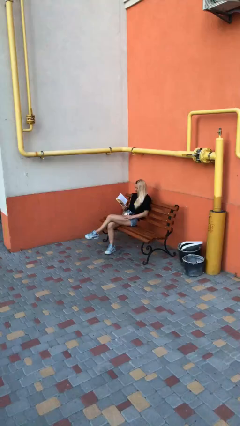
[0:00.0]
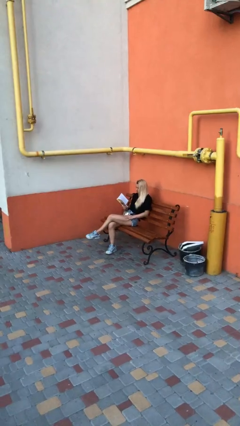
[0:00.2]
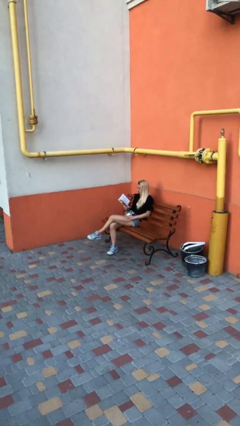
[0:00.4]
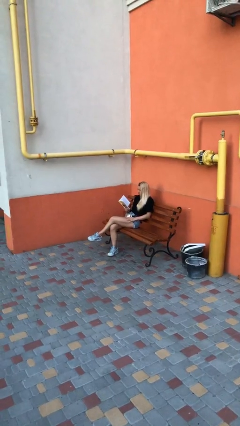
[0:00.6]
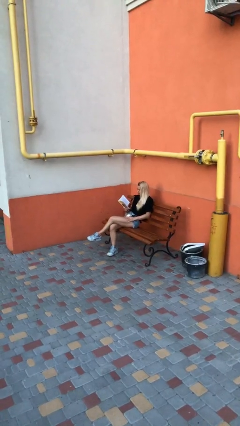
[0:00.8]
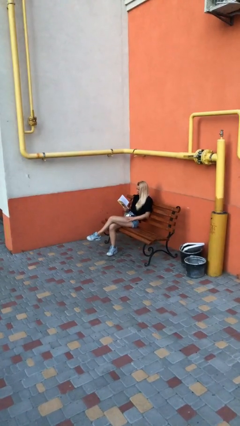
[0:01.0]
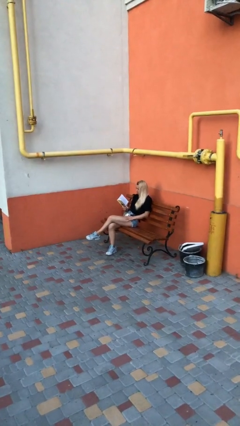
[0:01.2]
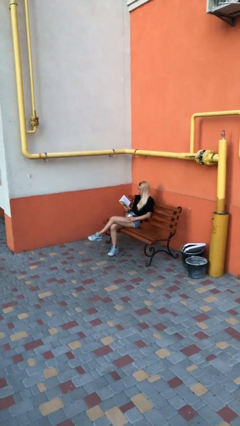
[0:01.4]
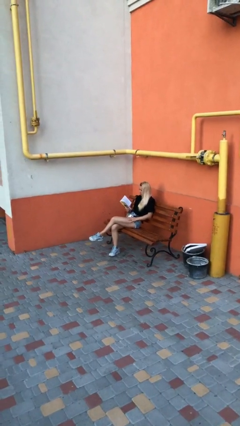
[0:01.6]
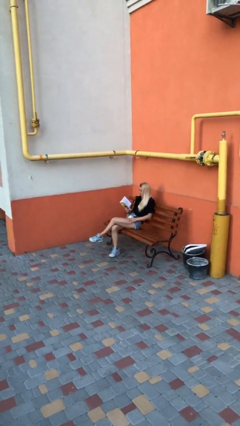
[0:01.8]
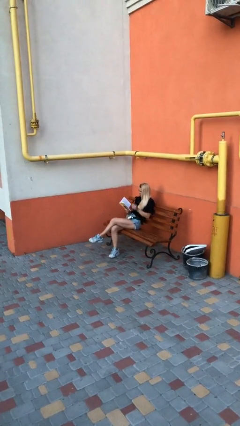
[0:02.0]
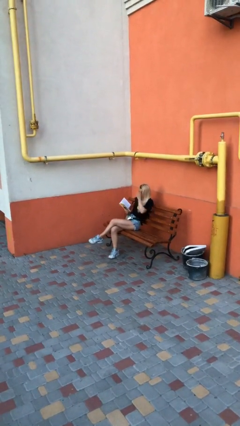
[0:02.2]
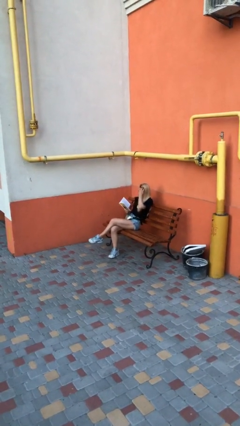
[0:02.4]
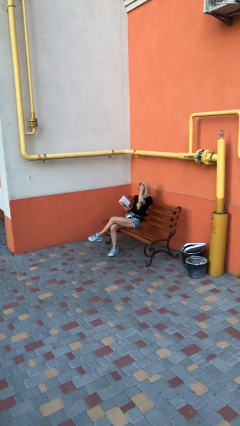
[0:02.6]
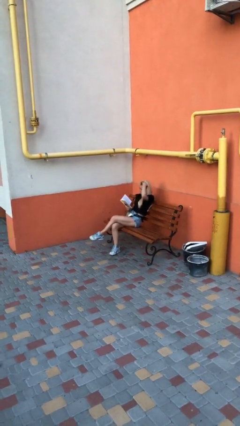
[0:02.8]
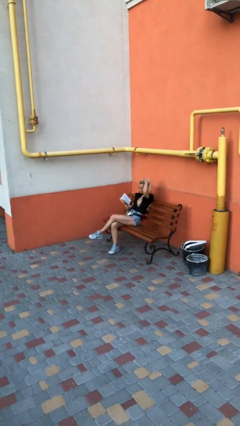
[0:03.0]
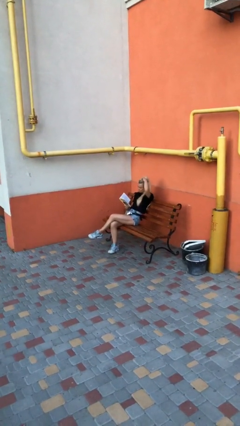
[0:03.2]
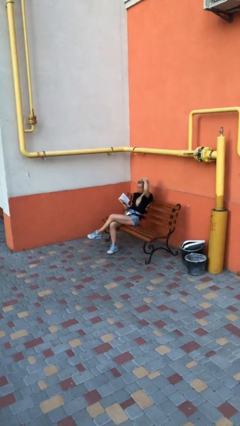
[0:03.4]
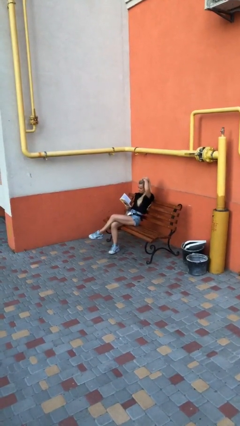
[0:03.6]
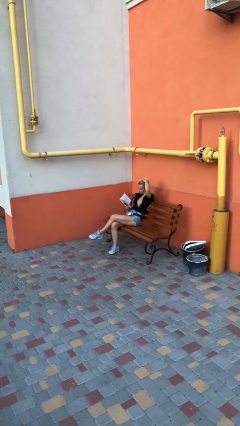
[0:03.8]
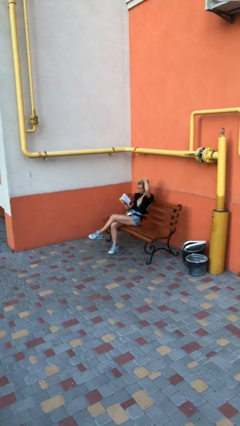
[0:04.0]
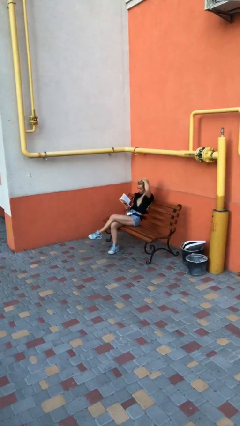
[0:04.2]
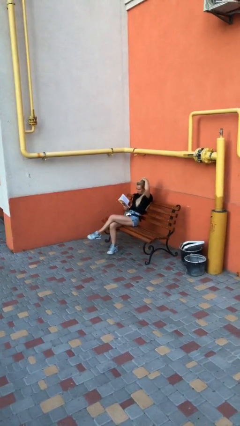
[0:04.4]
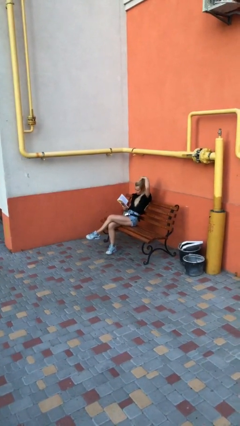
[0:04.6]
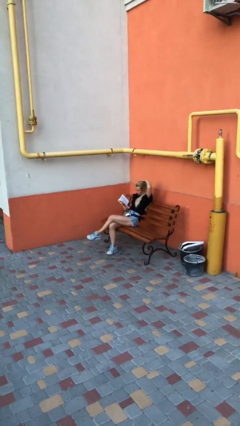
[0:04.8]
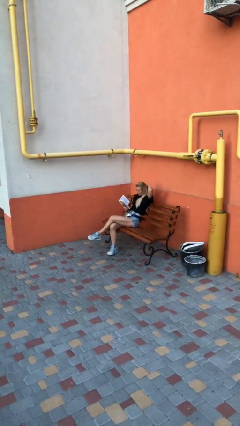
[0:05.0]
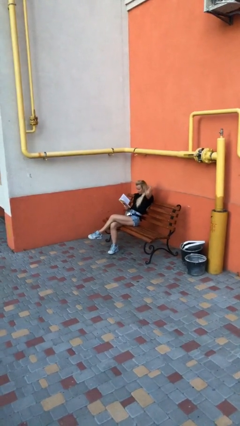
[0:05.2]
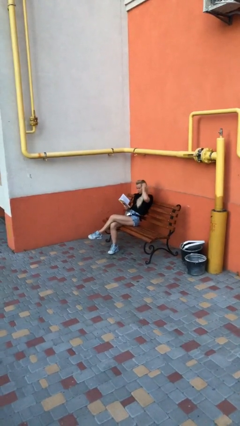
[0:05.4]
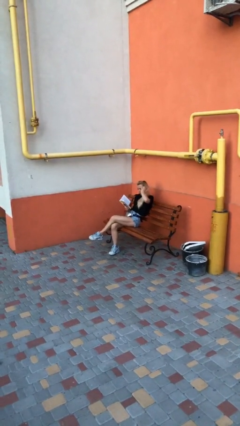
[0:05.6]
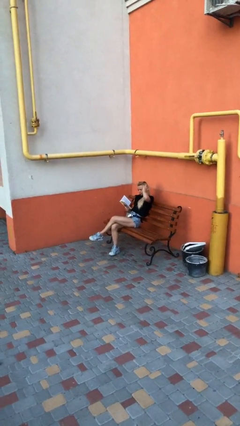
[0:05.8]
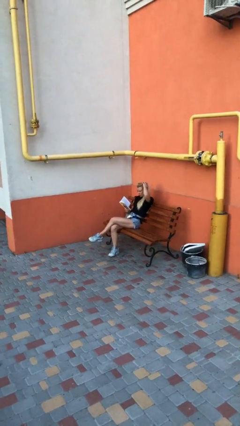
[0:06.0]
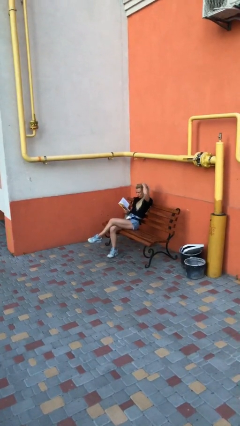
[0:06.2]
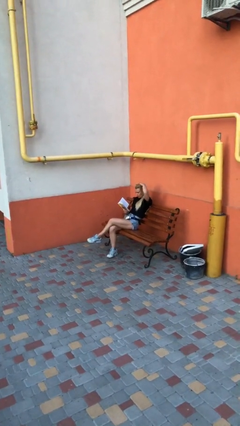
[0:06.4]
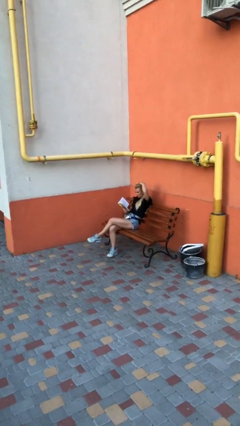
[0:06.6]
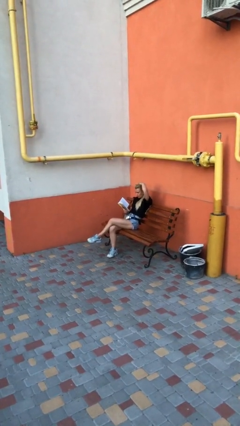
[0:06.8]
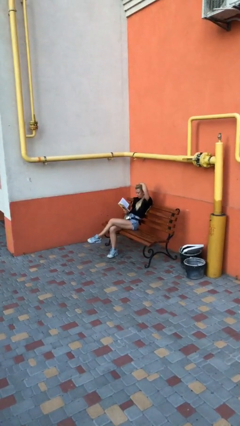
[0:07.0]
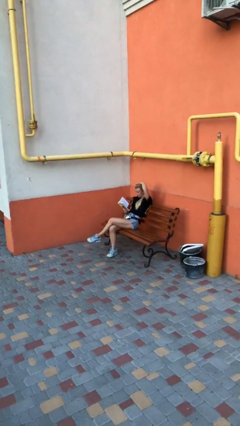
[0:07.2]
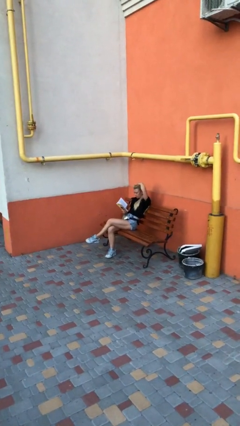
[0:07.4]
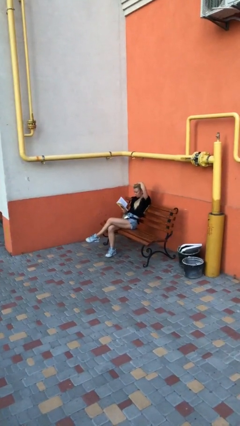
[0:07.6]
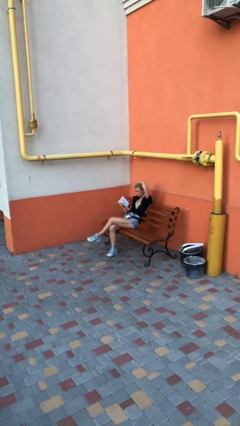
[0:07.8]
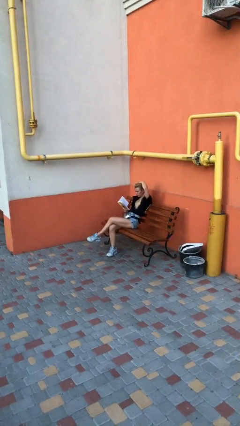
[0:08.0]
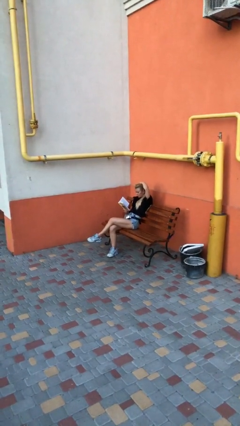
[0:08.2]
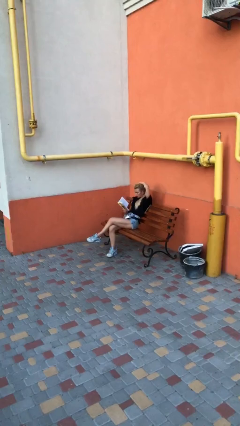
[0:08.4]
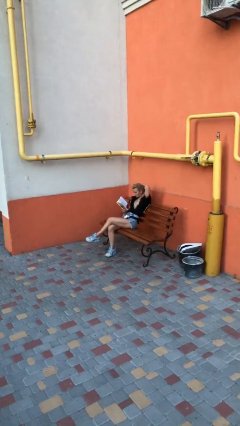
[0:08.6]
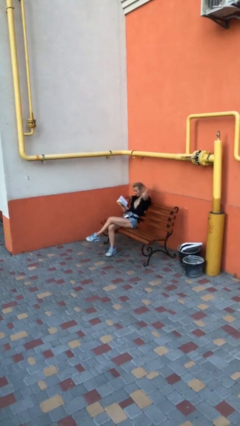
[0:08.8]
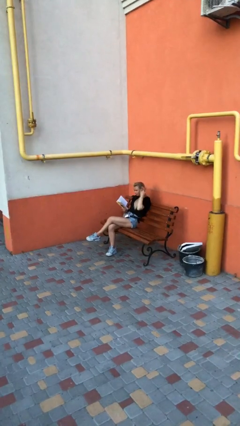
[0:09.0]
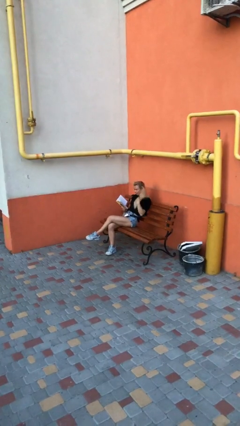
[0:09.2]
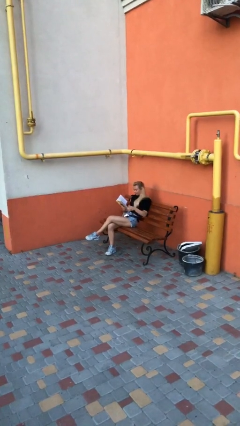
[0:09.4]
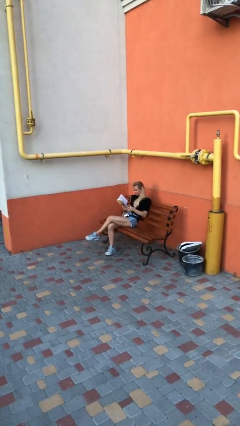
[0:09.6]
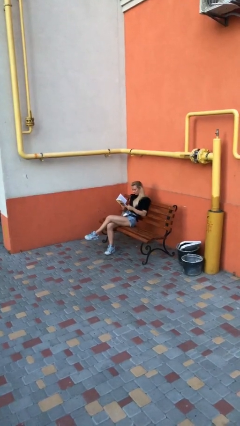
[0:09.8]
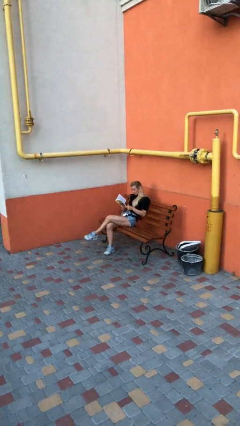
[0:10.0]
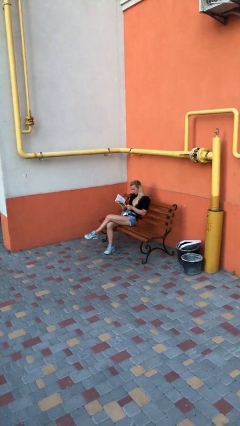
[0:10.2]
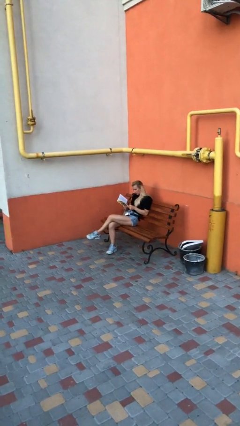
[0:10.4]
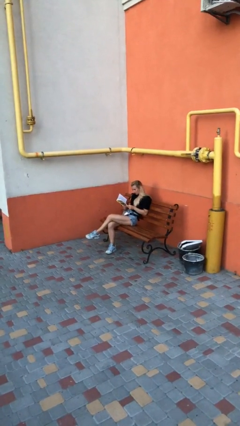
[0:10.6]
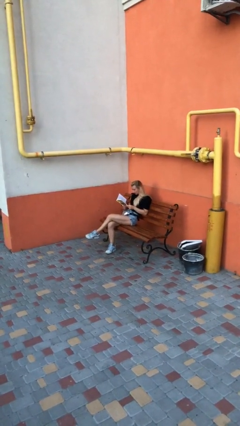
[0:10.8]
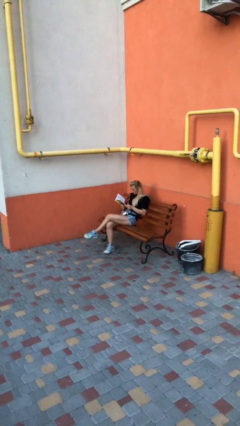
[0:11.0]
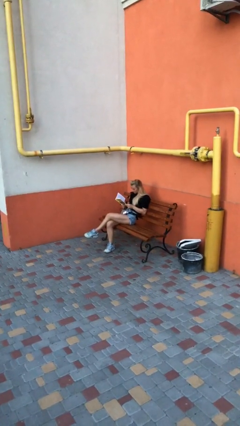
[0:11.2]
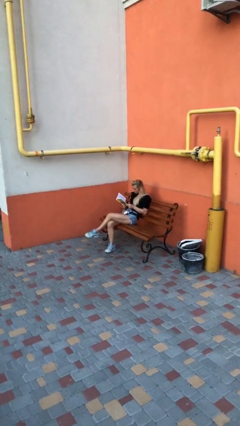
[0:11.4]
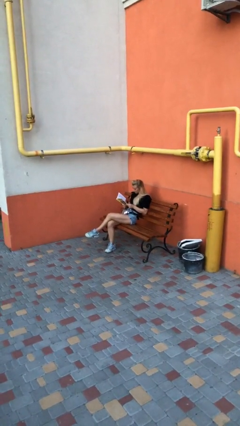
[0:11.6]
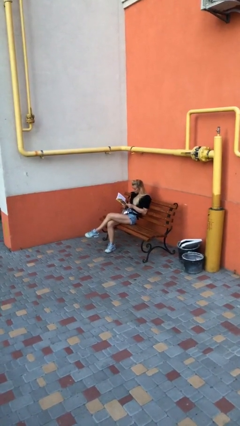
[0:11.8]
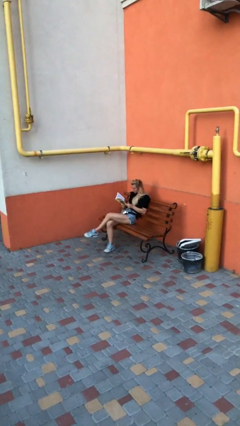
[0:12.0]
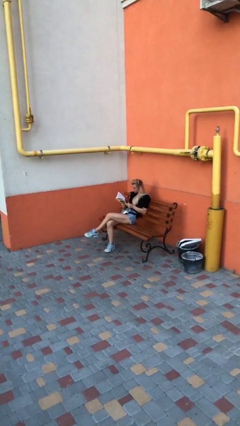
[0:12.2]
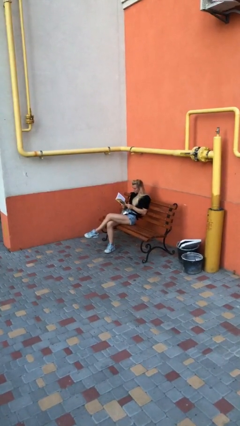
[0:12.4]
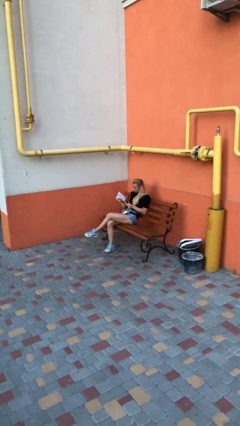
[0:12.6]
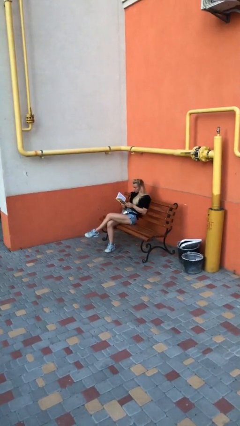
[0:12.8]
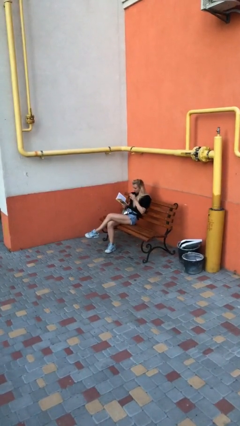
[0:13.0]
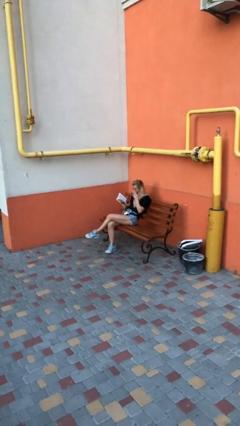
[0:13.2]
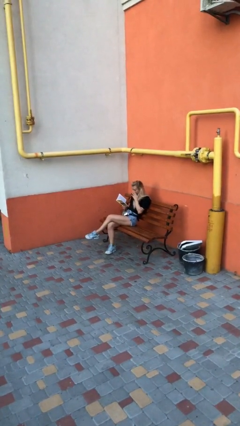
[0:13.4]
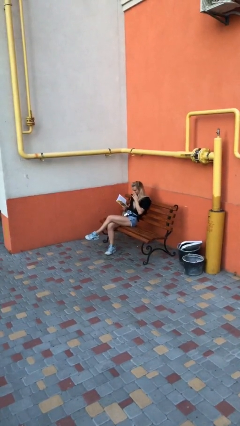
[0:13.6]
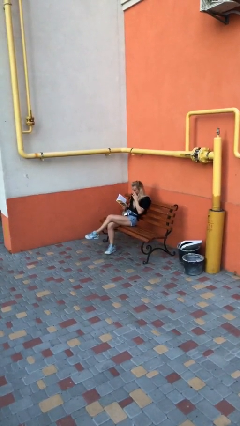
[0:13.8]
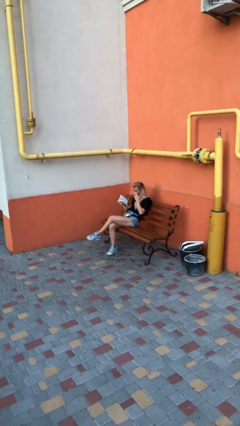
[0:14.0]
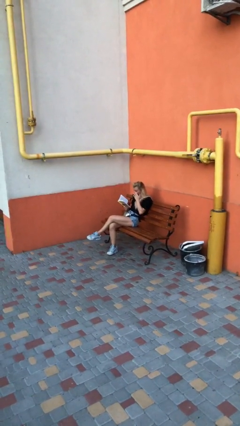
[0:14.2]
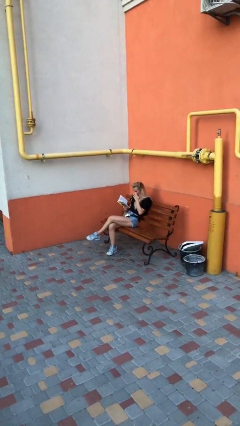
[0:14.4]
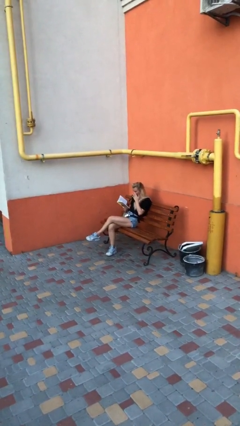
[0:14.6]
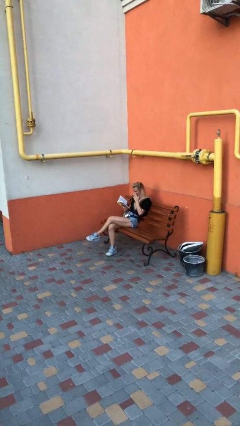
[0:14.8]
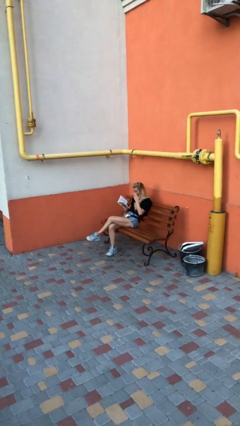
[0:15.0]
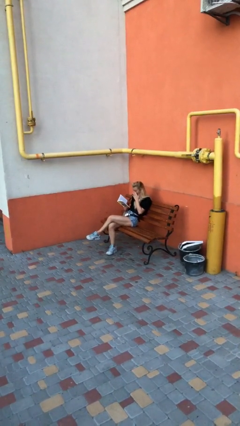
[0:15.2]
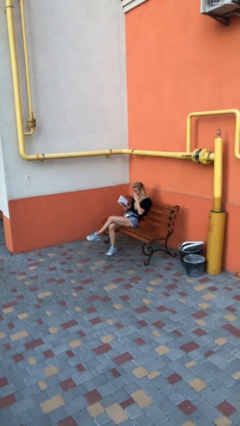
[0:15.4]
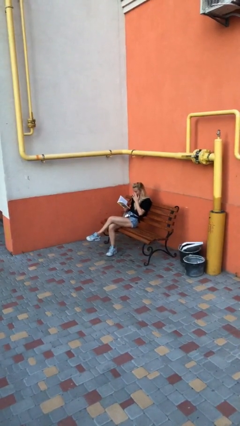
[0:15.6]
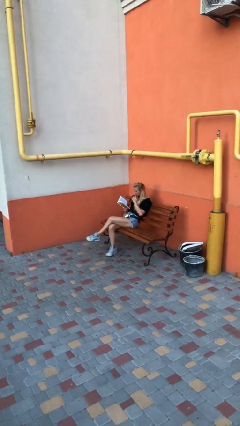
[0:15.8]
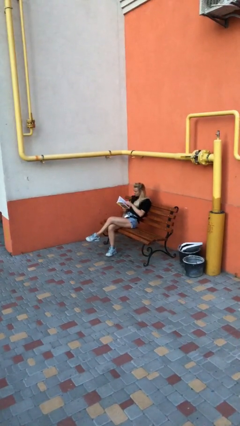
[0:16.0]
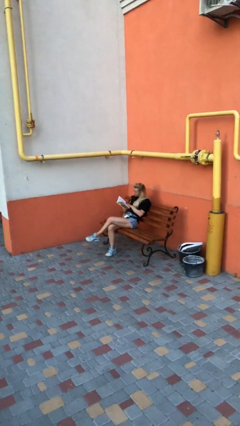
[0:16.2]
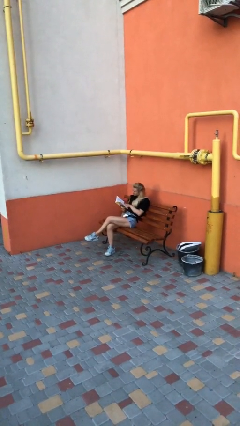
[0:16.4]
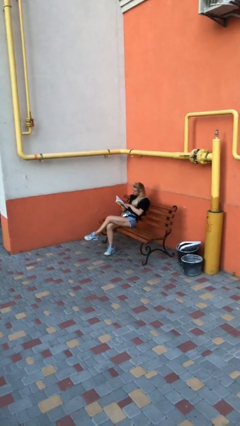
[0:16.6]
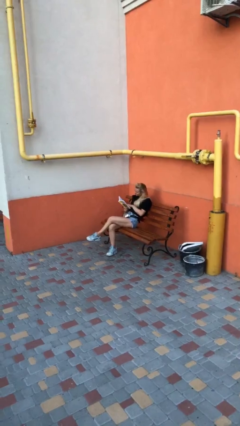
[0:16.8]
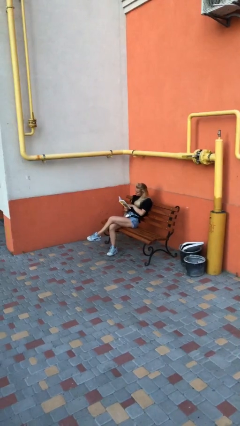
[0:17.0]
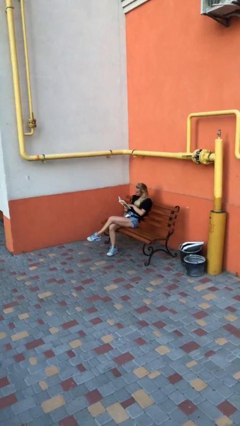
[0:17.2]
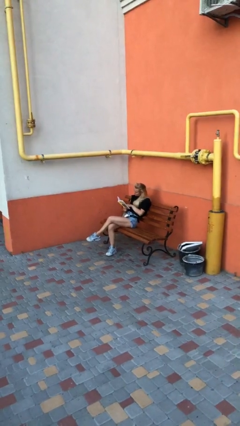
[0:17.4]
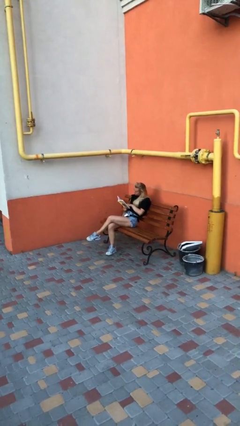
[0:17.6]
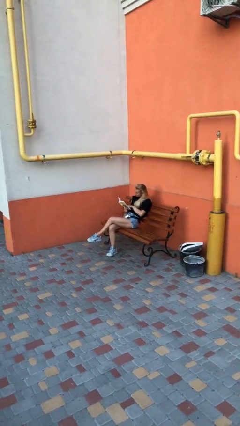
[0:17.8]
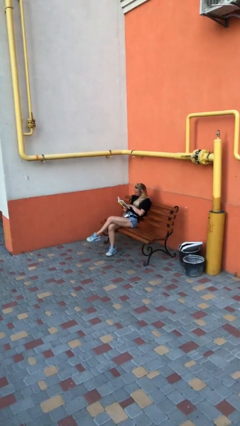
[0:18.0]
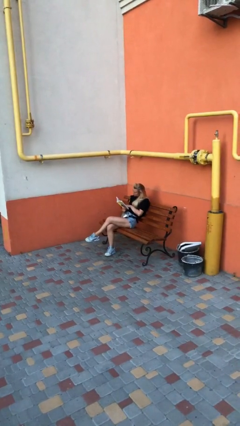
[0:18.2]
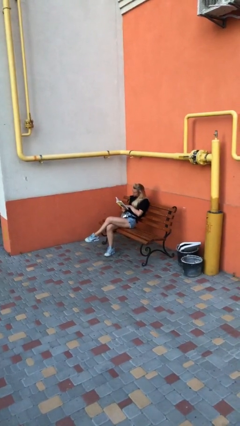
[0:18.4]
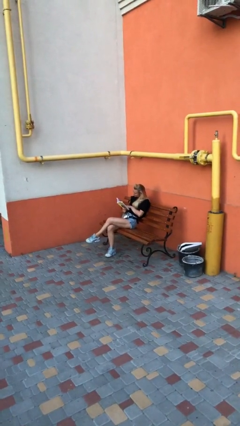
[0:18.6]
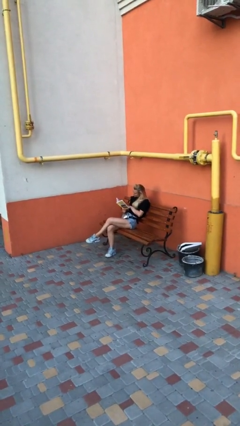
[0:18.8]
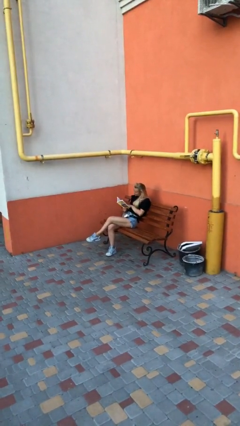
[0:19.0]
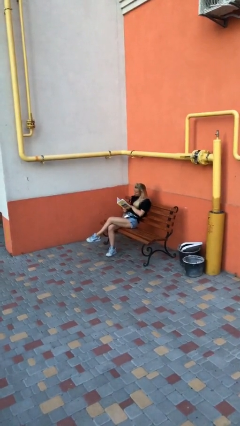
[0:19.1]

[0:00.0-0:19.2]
person reads document
